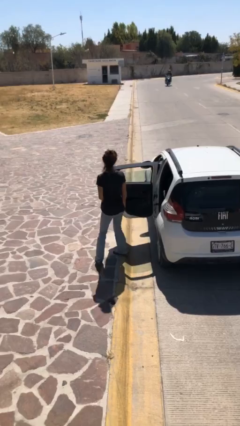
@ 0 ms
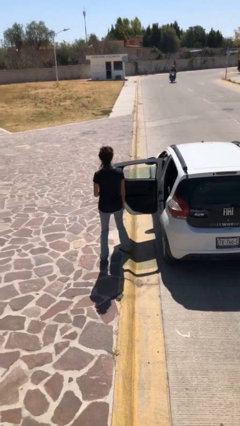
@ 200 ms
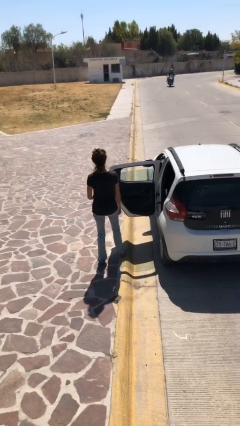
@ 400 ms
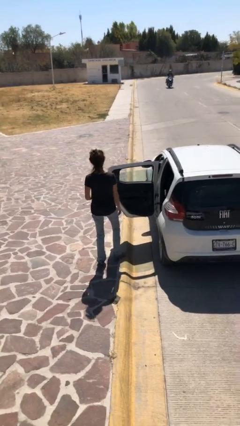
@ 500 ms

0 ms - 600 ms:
person exits car

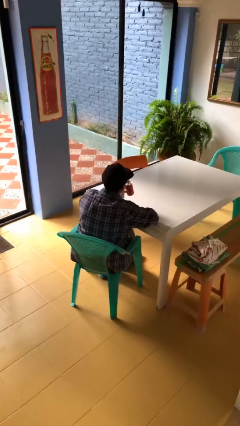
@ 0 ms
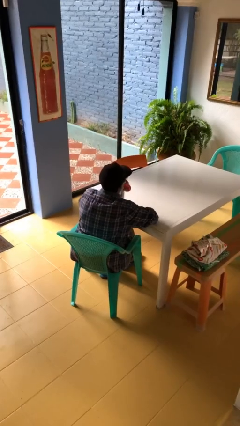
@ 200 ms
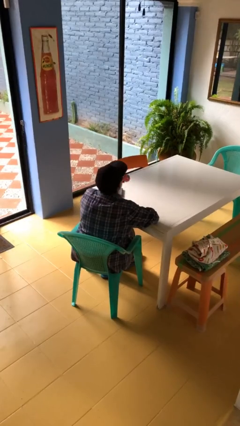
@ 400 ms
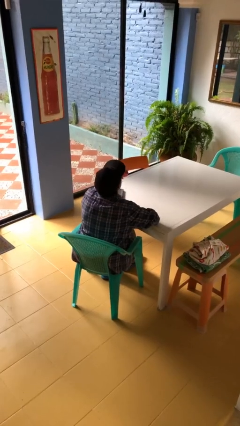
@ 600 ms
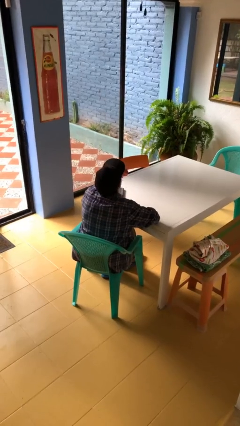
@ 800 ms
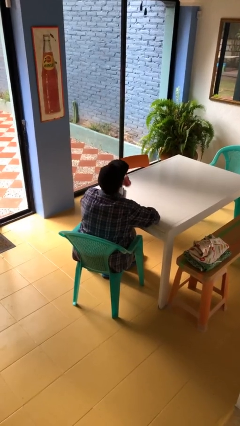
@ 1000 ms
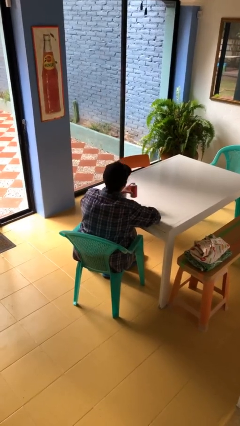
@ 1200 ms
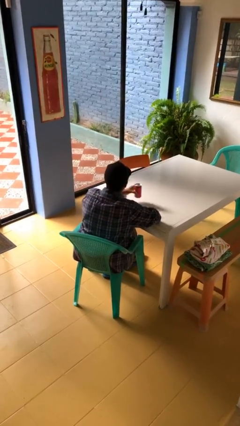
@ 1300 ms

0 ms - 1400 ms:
person drinks from beverage can

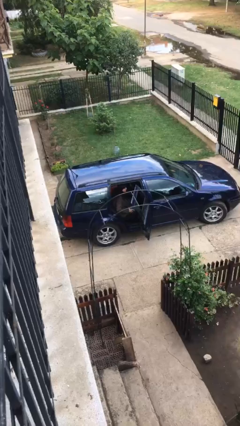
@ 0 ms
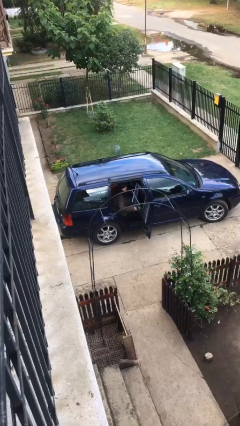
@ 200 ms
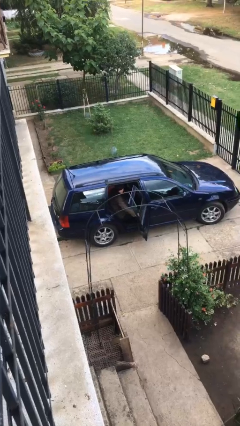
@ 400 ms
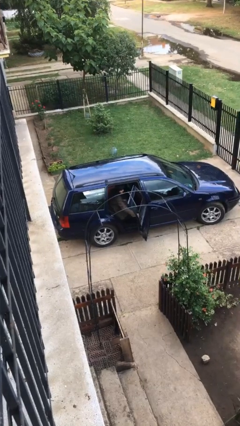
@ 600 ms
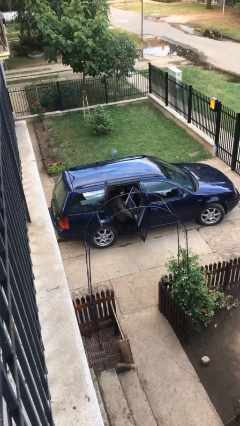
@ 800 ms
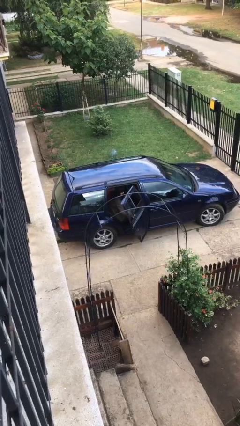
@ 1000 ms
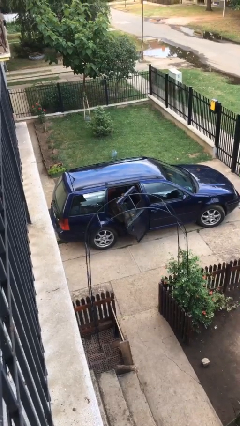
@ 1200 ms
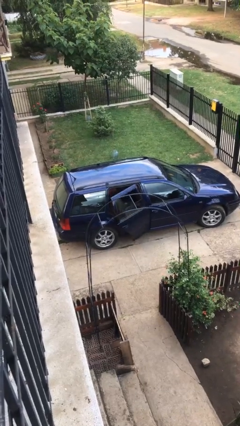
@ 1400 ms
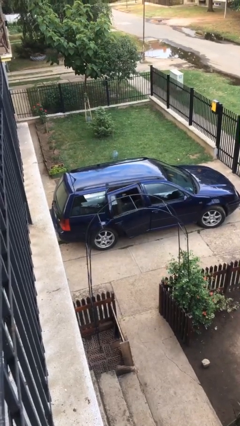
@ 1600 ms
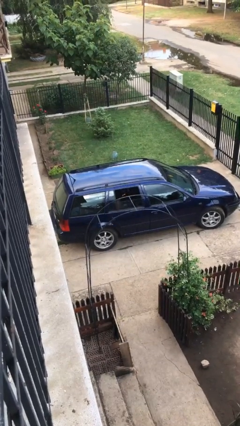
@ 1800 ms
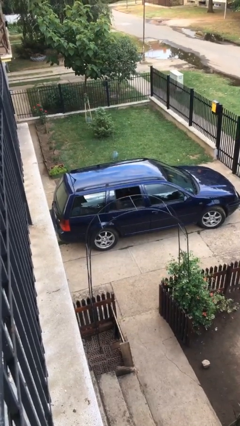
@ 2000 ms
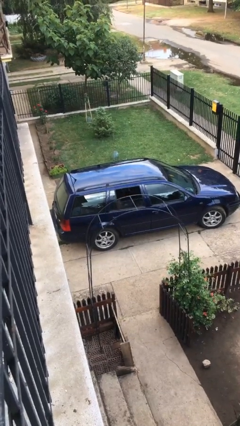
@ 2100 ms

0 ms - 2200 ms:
person closes car door

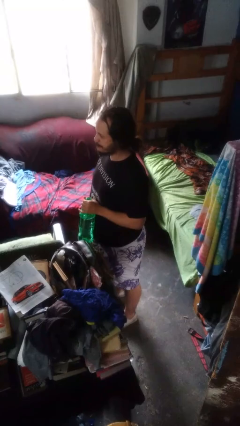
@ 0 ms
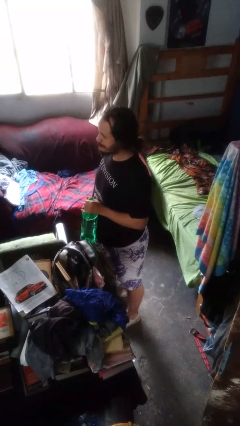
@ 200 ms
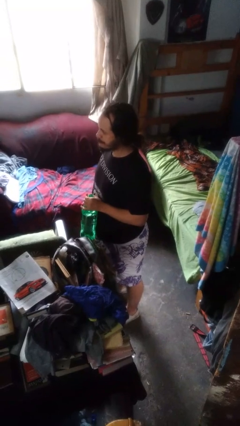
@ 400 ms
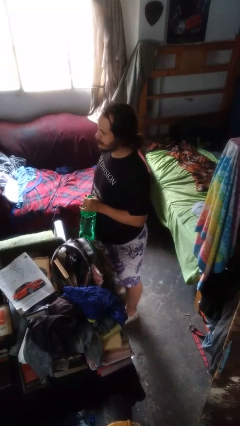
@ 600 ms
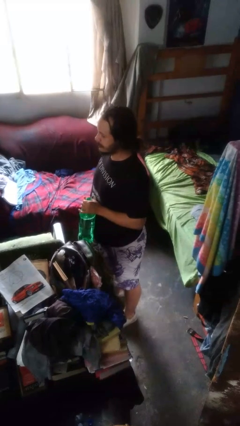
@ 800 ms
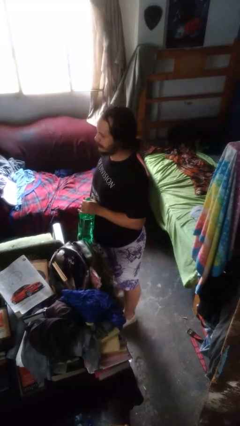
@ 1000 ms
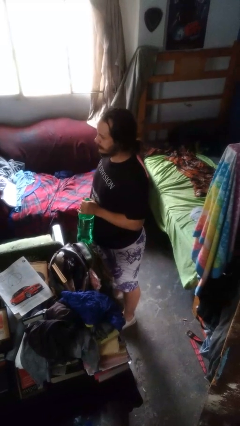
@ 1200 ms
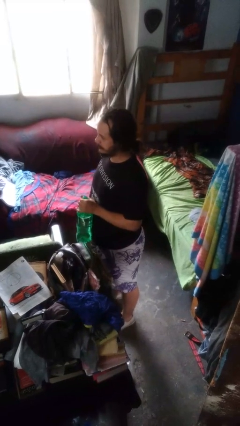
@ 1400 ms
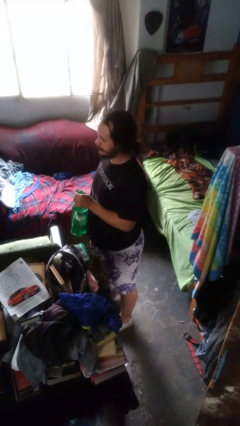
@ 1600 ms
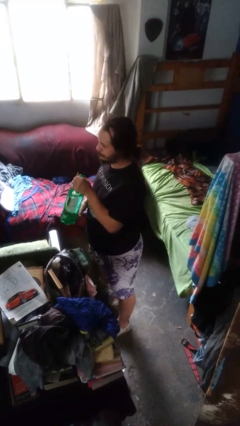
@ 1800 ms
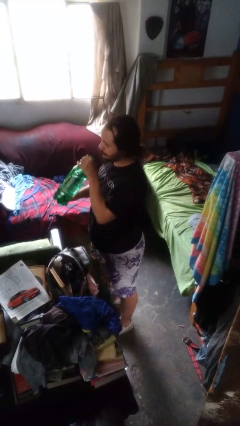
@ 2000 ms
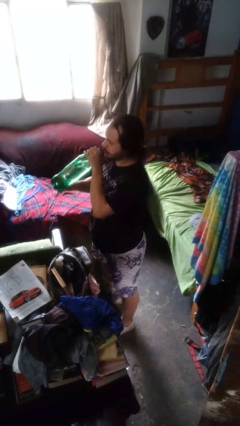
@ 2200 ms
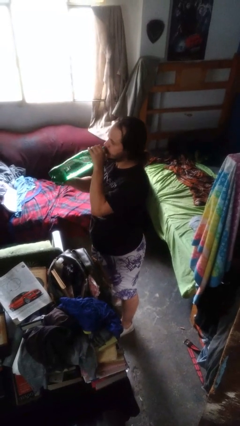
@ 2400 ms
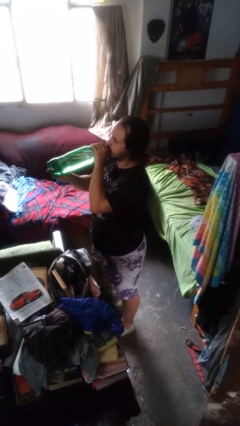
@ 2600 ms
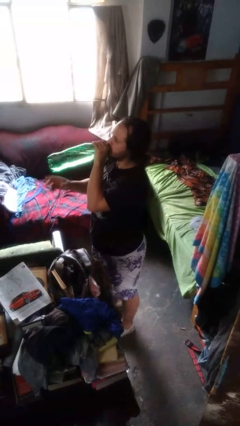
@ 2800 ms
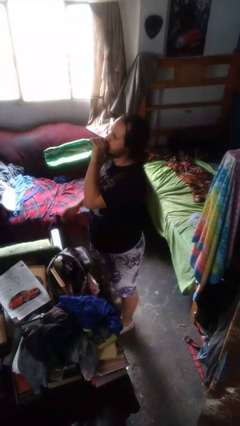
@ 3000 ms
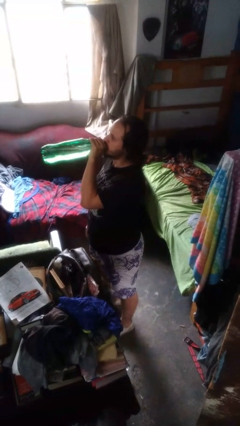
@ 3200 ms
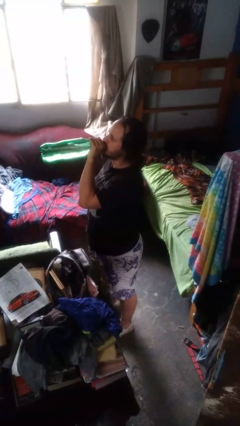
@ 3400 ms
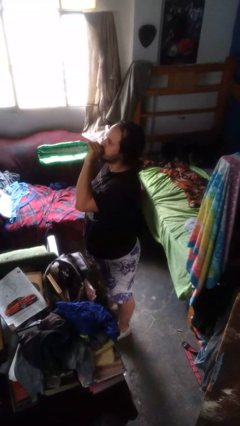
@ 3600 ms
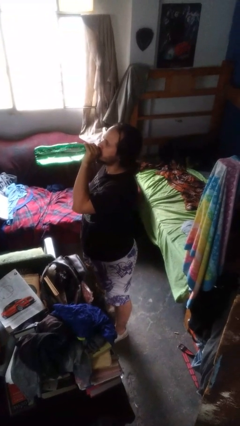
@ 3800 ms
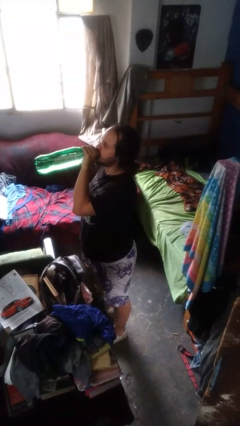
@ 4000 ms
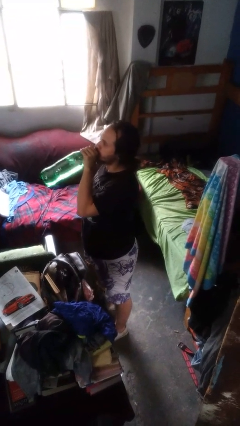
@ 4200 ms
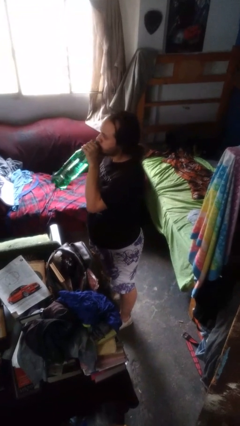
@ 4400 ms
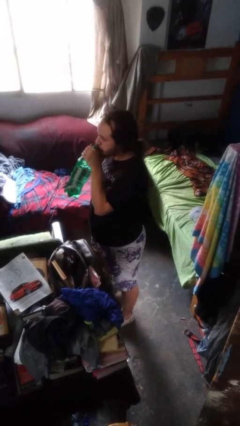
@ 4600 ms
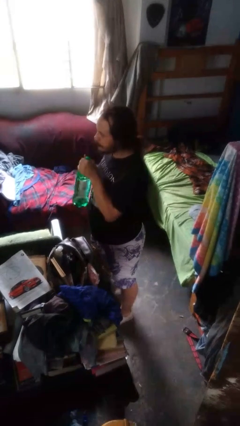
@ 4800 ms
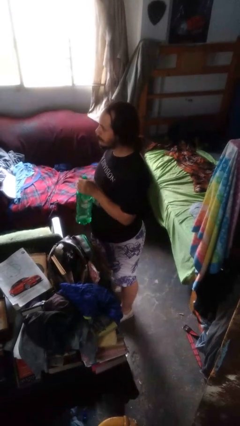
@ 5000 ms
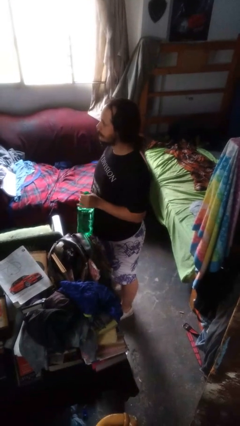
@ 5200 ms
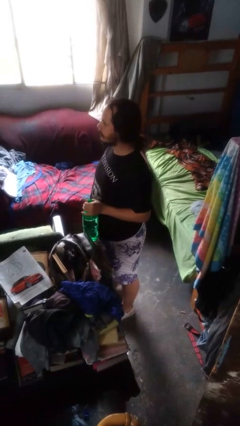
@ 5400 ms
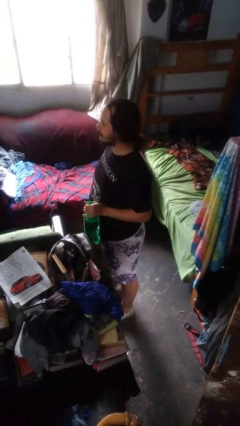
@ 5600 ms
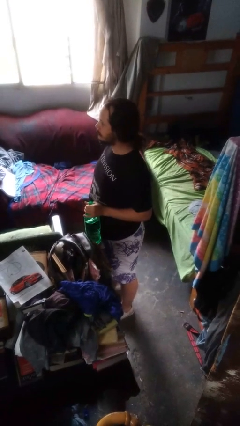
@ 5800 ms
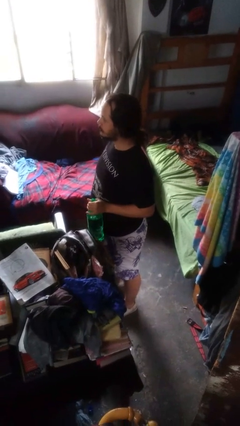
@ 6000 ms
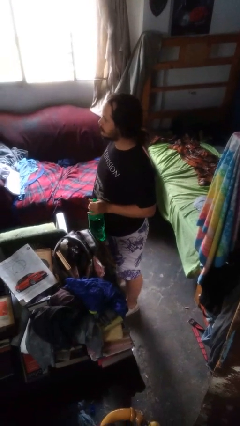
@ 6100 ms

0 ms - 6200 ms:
person drinks from bottle

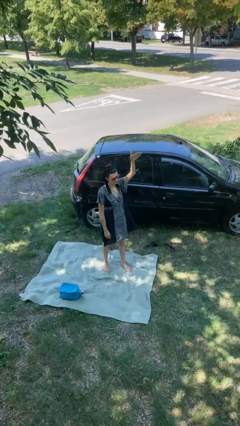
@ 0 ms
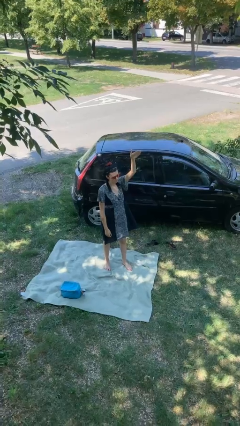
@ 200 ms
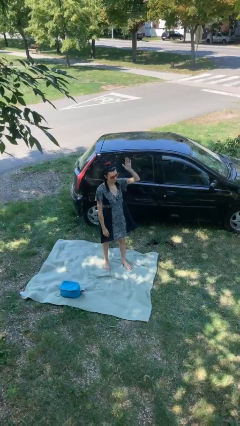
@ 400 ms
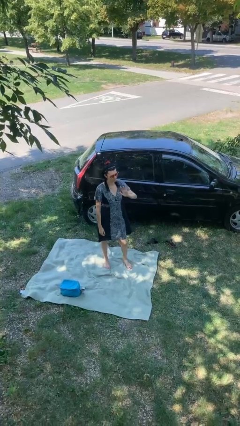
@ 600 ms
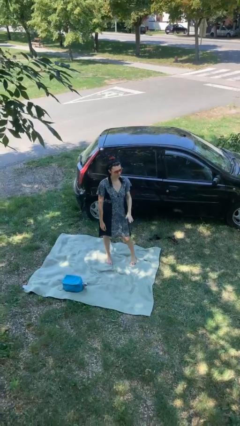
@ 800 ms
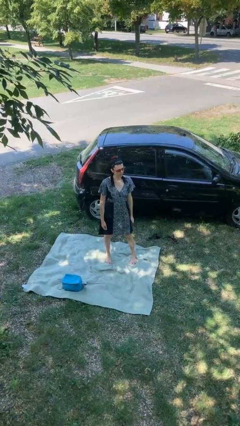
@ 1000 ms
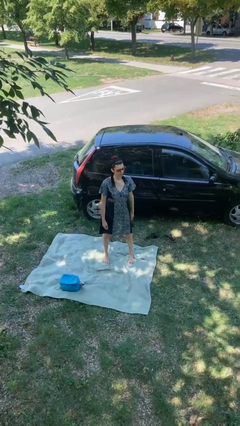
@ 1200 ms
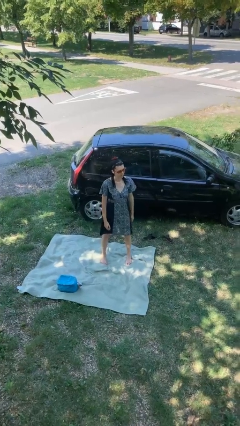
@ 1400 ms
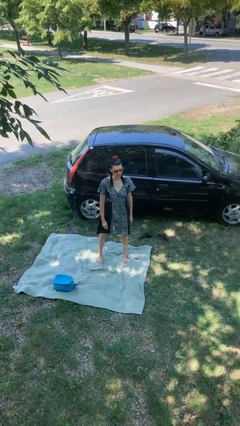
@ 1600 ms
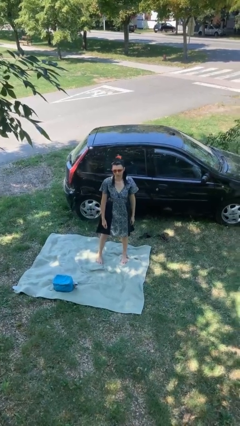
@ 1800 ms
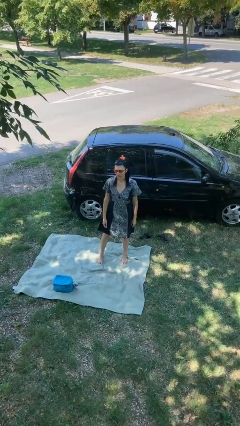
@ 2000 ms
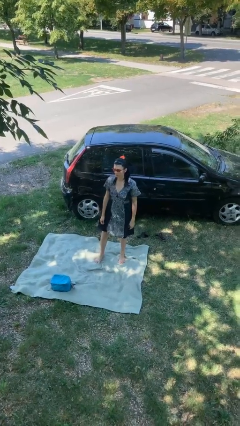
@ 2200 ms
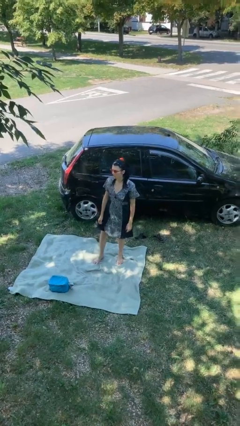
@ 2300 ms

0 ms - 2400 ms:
person gestures lower hand

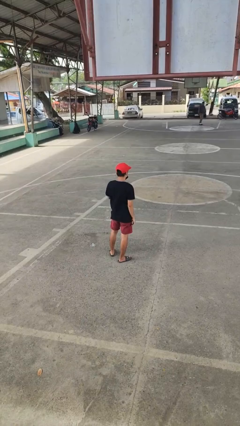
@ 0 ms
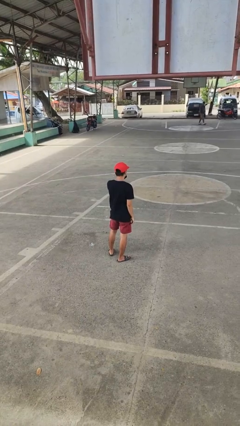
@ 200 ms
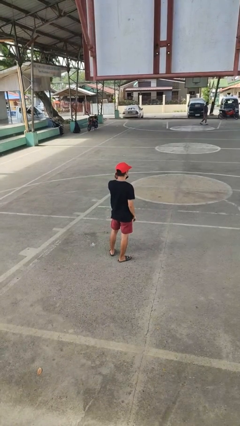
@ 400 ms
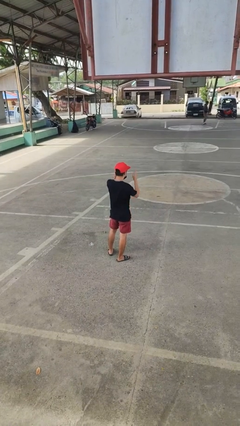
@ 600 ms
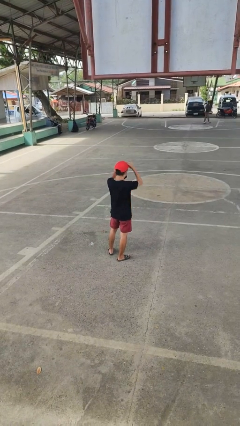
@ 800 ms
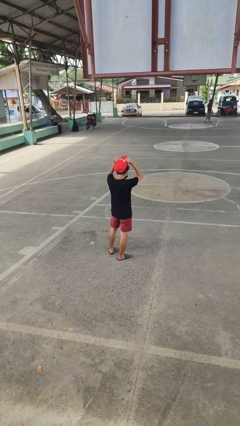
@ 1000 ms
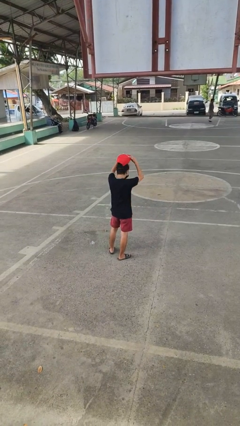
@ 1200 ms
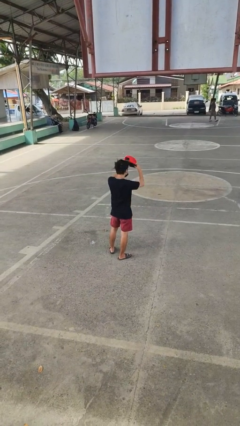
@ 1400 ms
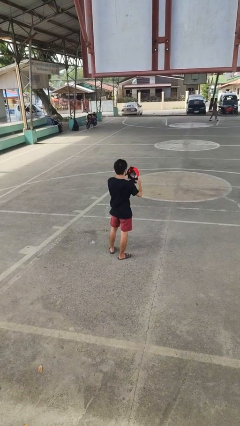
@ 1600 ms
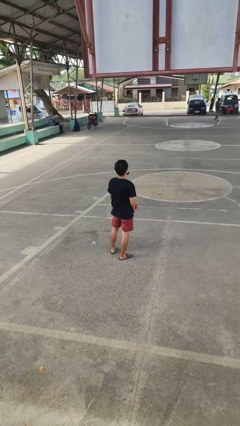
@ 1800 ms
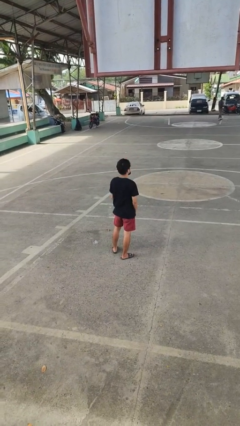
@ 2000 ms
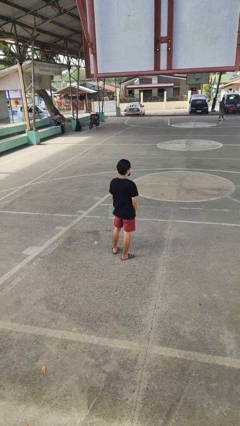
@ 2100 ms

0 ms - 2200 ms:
person takes off hat

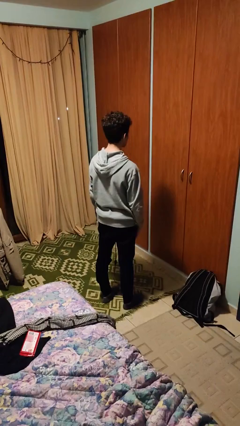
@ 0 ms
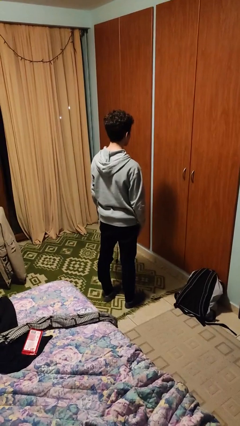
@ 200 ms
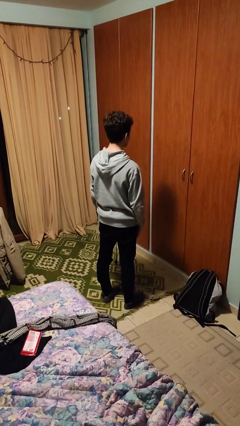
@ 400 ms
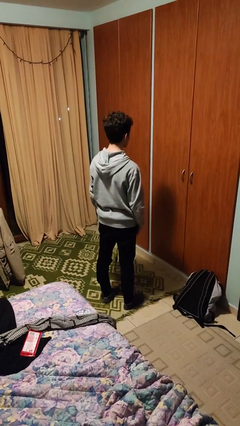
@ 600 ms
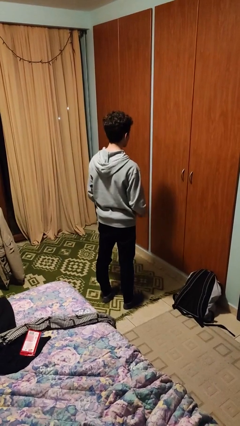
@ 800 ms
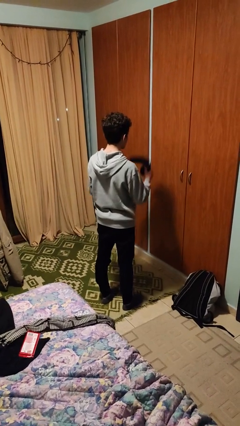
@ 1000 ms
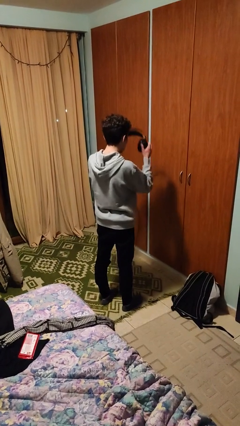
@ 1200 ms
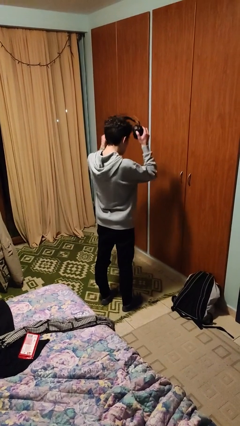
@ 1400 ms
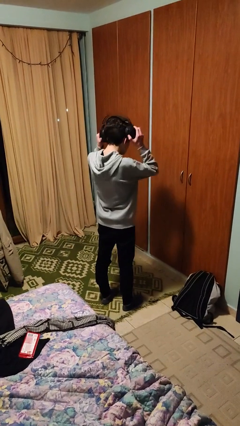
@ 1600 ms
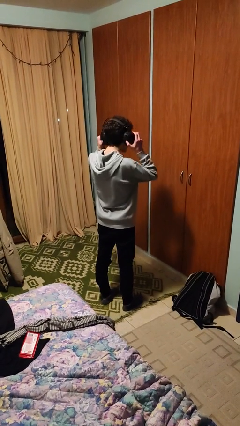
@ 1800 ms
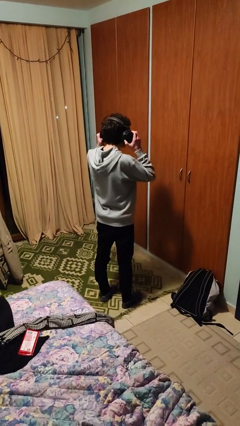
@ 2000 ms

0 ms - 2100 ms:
person puts on headphones
